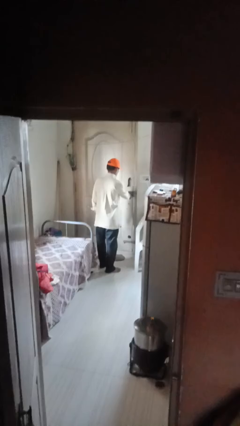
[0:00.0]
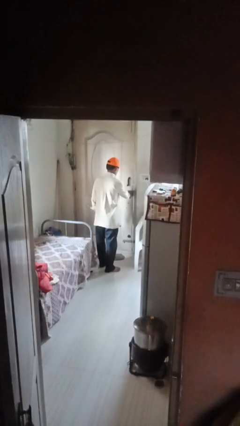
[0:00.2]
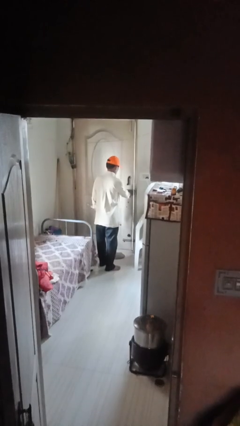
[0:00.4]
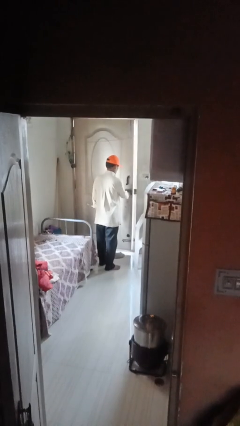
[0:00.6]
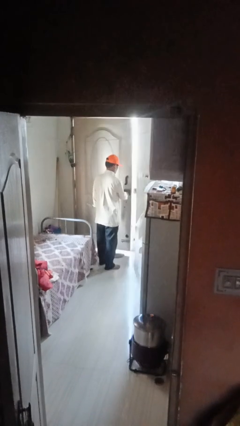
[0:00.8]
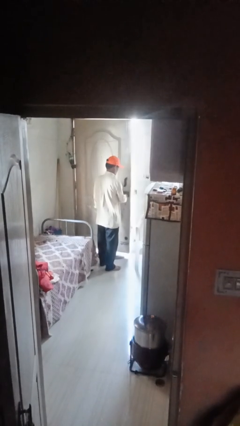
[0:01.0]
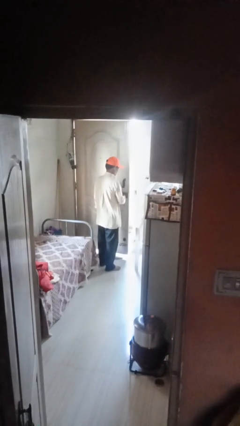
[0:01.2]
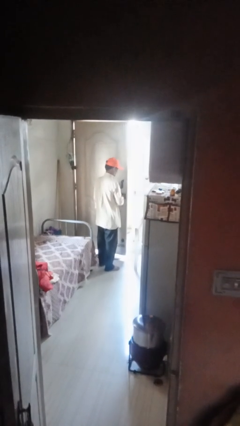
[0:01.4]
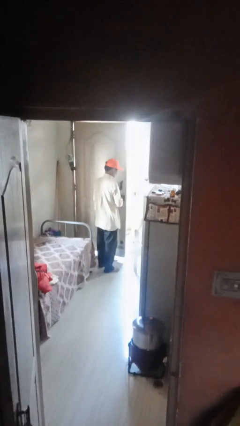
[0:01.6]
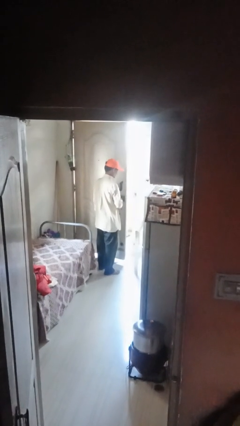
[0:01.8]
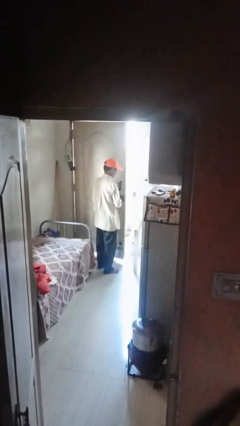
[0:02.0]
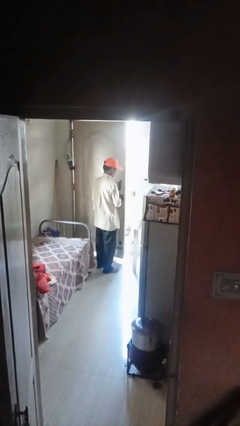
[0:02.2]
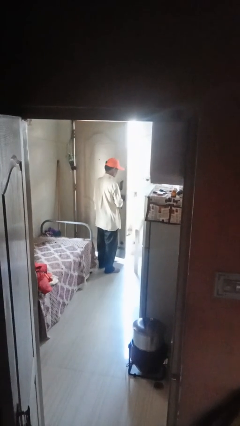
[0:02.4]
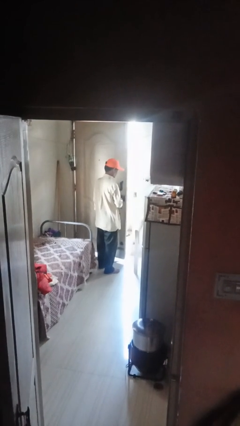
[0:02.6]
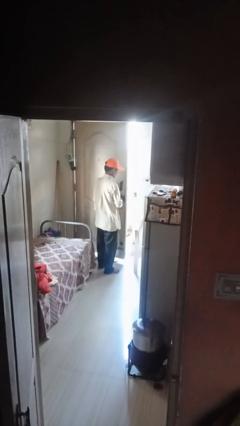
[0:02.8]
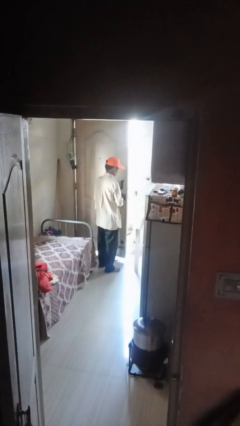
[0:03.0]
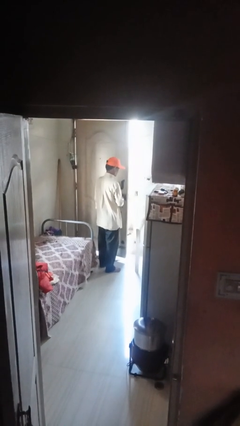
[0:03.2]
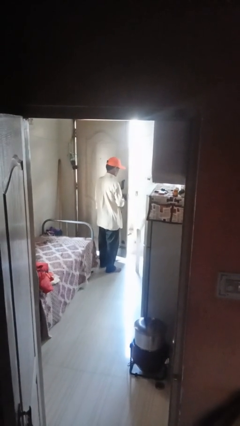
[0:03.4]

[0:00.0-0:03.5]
person opens facility door

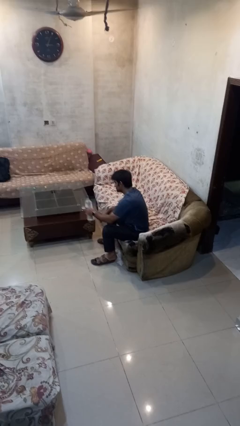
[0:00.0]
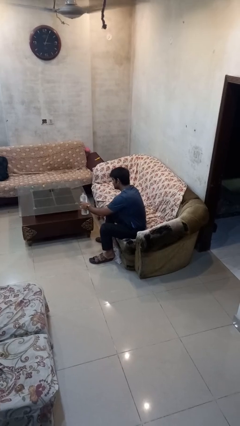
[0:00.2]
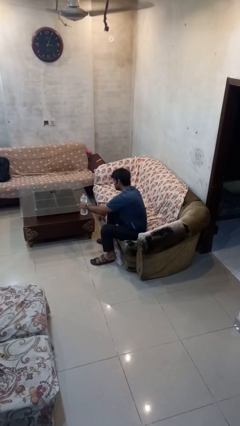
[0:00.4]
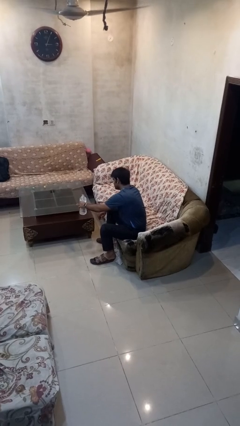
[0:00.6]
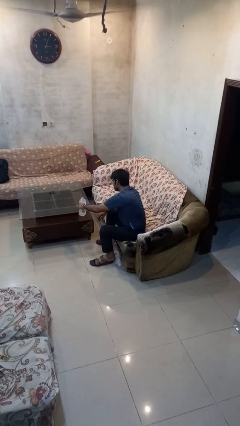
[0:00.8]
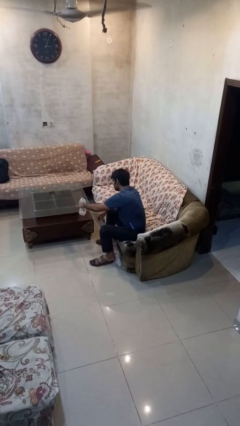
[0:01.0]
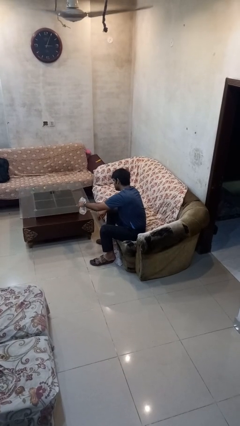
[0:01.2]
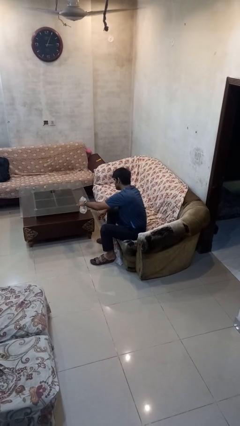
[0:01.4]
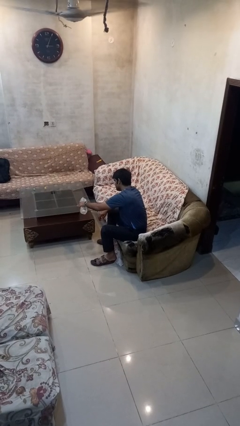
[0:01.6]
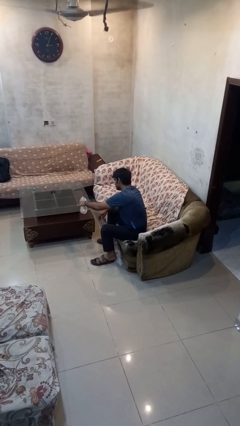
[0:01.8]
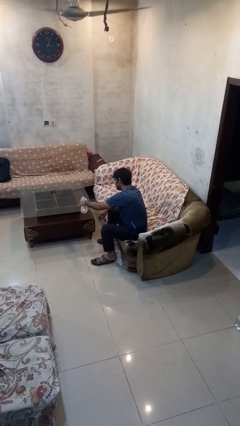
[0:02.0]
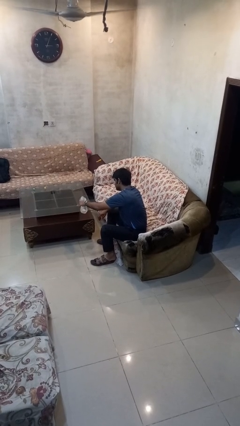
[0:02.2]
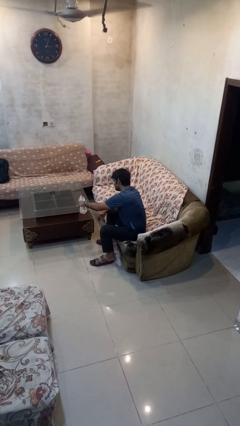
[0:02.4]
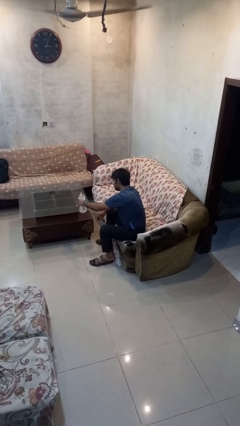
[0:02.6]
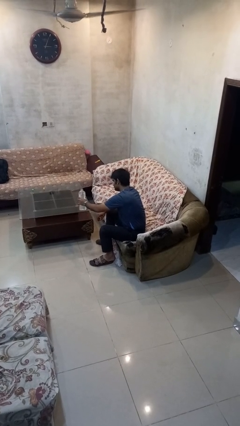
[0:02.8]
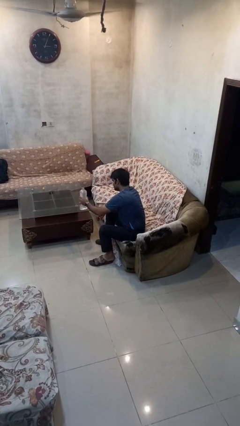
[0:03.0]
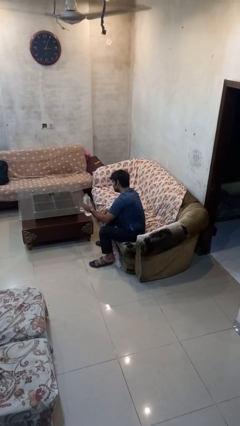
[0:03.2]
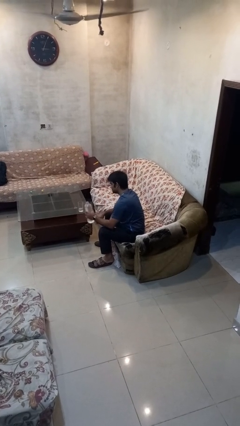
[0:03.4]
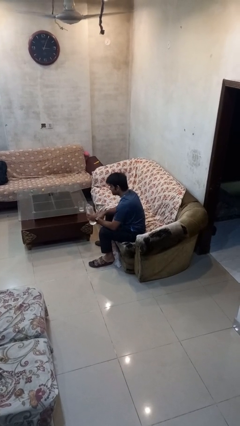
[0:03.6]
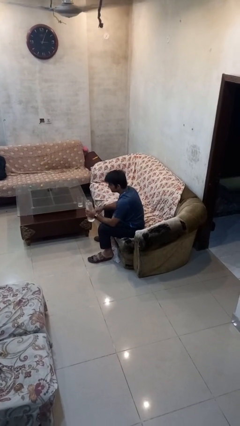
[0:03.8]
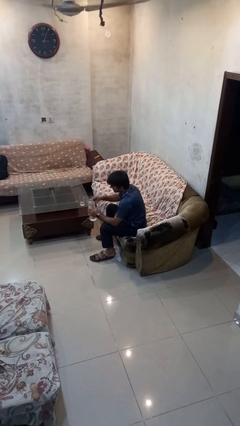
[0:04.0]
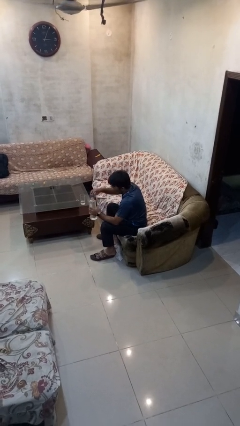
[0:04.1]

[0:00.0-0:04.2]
person pours liquid into cup

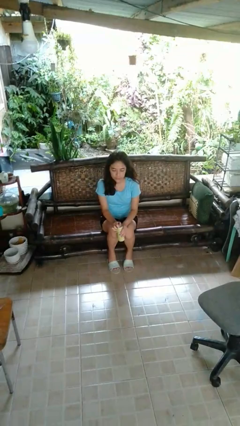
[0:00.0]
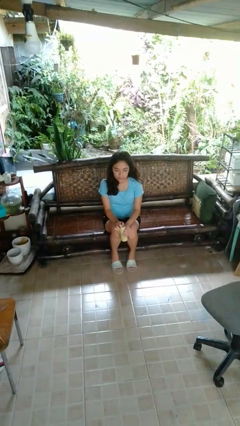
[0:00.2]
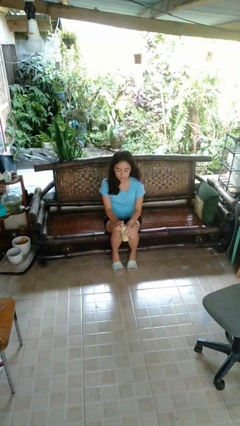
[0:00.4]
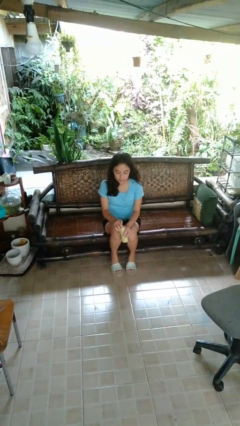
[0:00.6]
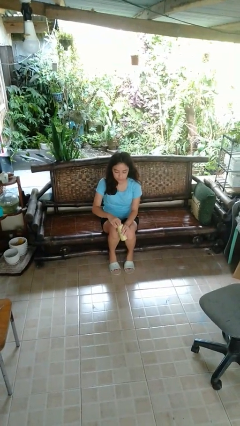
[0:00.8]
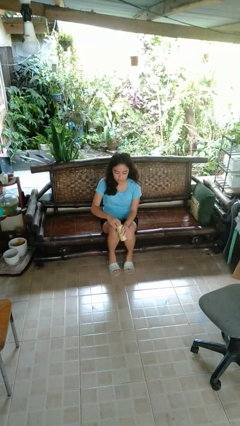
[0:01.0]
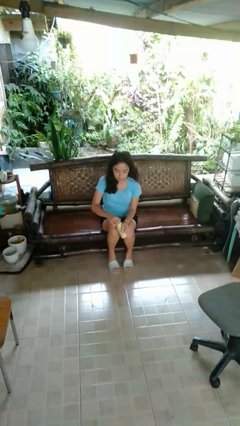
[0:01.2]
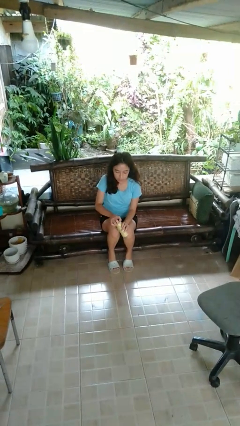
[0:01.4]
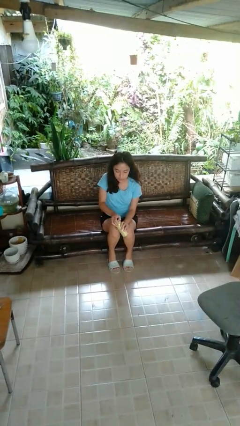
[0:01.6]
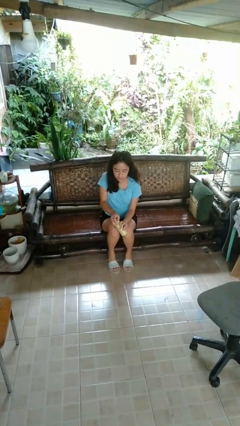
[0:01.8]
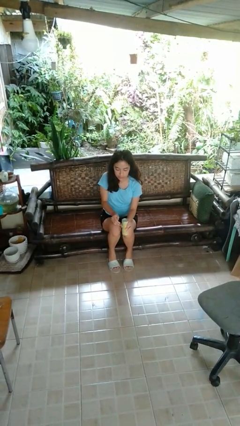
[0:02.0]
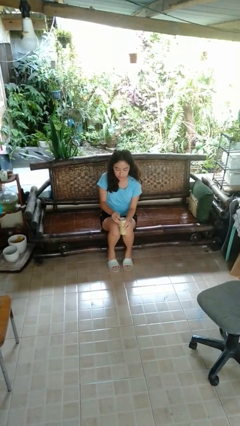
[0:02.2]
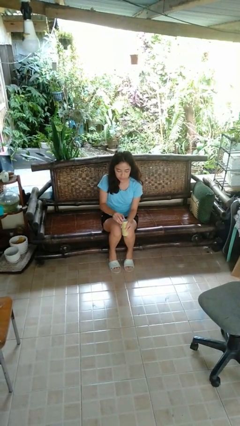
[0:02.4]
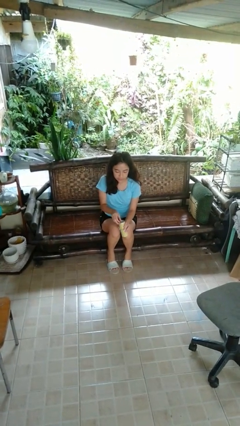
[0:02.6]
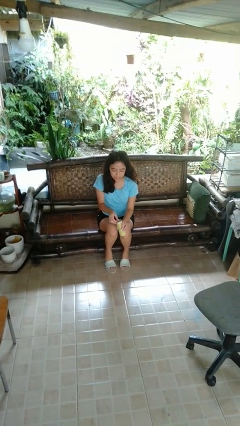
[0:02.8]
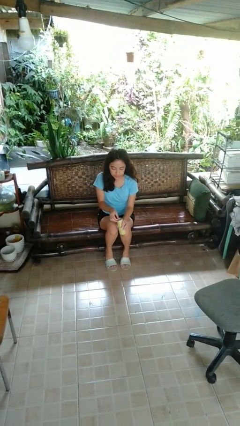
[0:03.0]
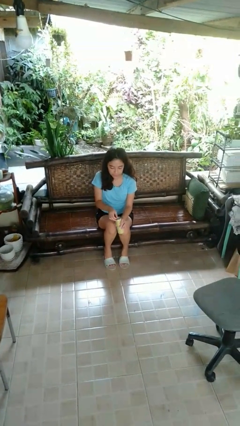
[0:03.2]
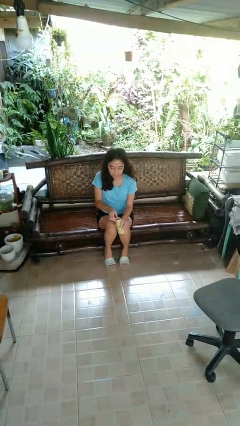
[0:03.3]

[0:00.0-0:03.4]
person opens beverage can

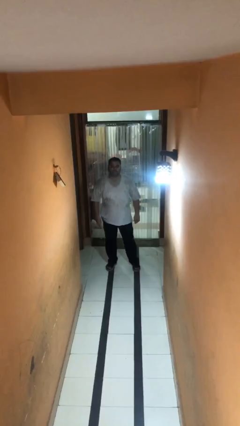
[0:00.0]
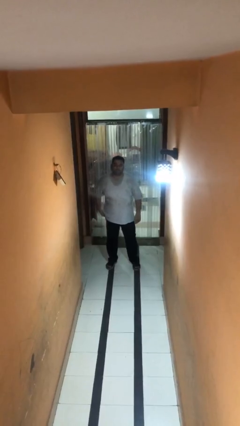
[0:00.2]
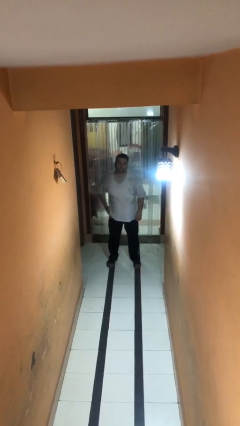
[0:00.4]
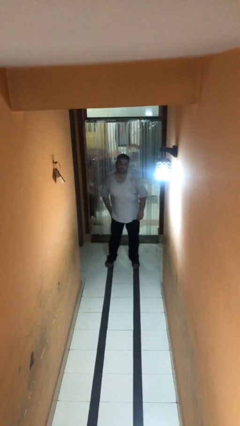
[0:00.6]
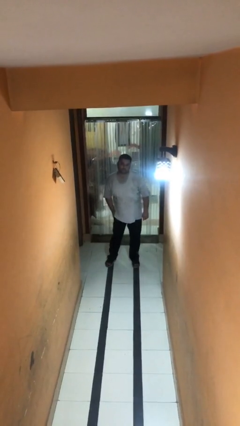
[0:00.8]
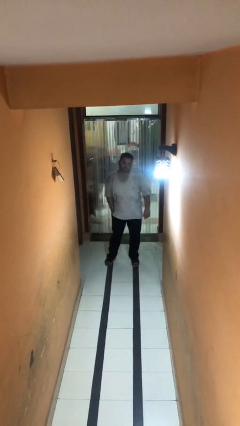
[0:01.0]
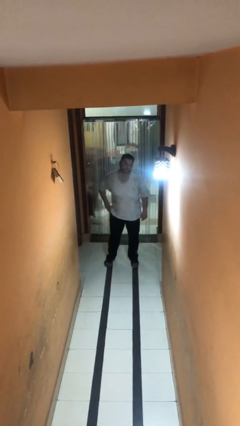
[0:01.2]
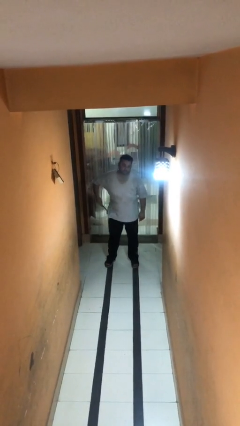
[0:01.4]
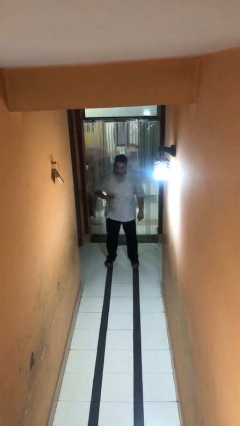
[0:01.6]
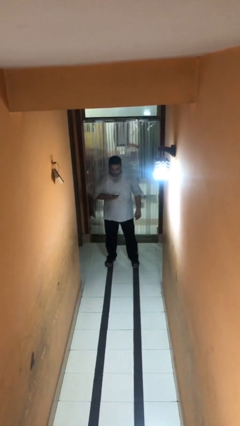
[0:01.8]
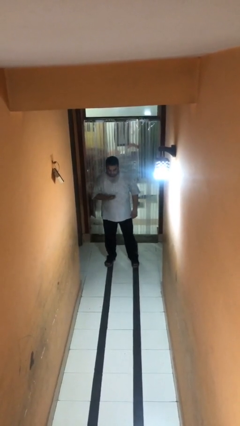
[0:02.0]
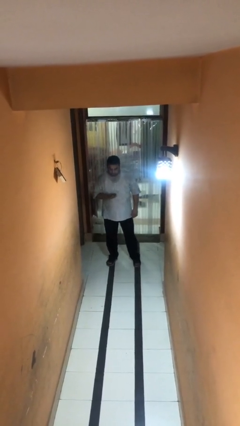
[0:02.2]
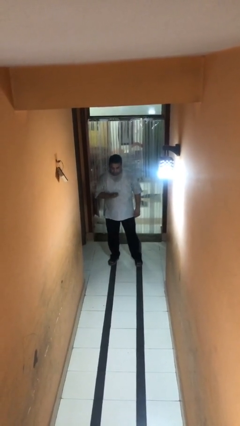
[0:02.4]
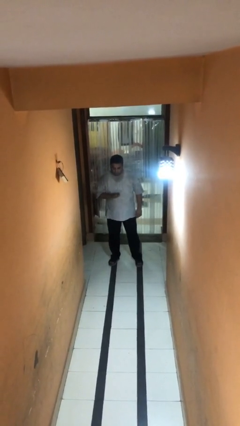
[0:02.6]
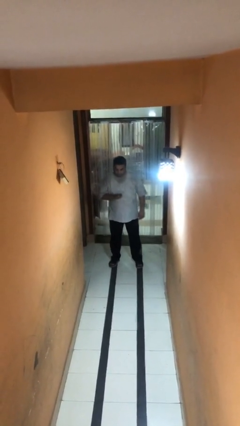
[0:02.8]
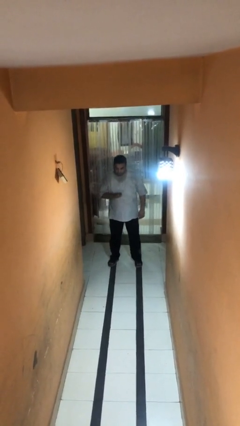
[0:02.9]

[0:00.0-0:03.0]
person takes phone from pocket

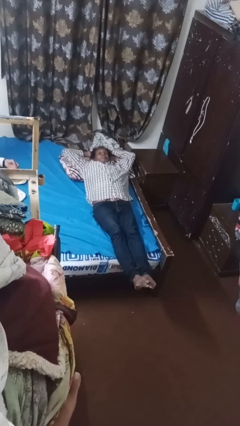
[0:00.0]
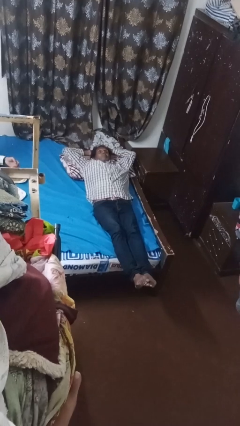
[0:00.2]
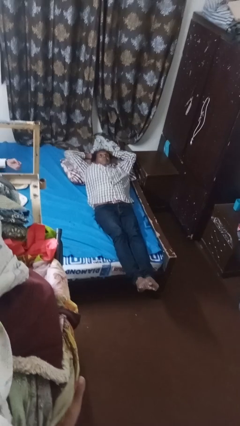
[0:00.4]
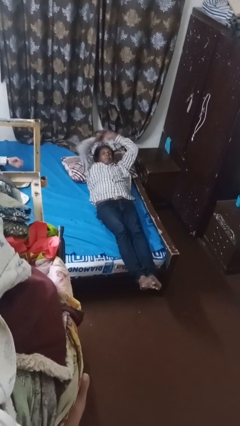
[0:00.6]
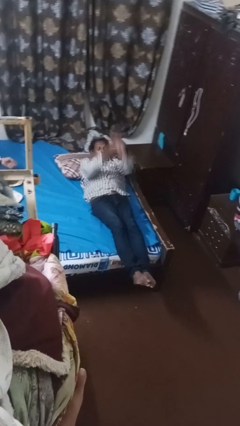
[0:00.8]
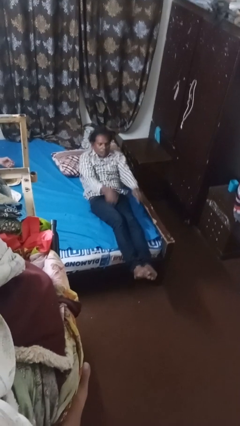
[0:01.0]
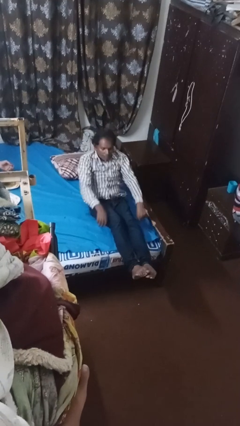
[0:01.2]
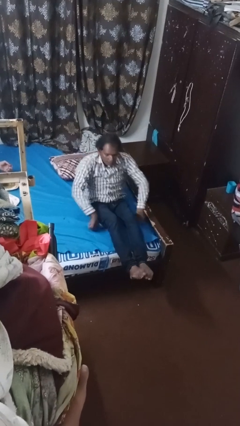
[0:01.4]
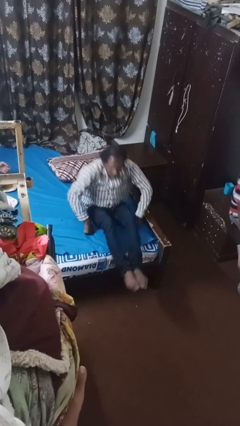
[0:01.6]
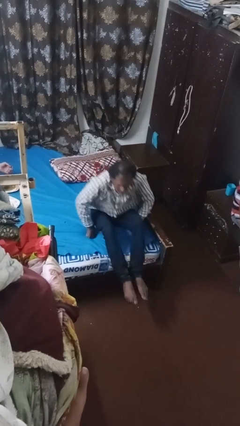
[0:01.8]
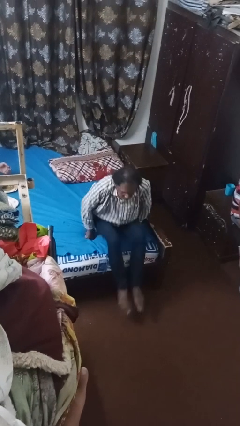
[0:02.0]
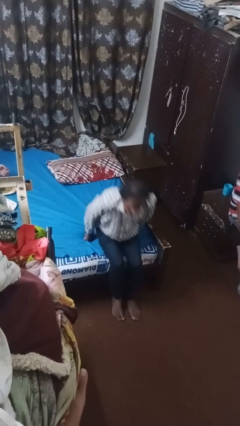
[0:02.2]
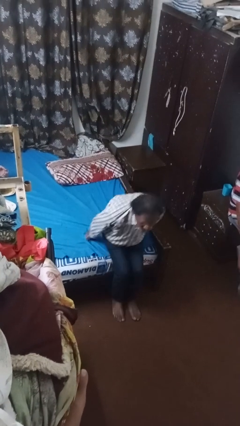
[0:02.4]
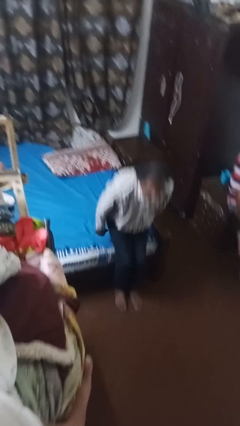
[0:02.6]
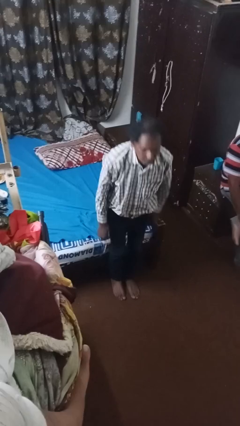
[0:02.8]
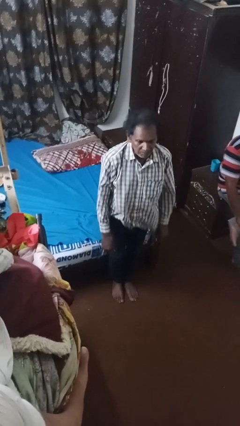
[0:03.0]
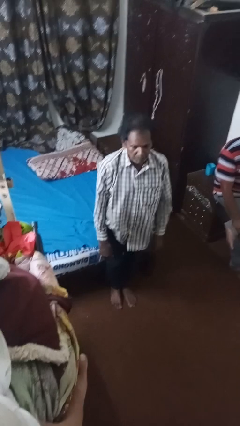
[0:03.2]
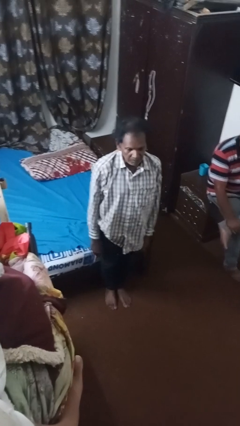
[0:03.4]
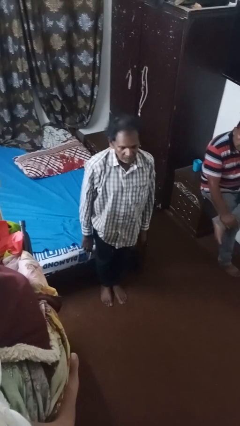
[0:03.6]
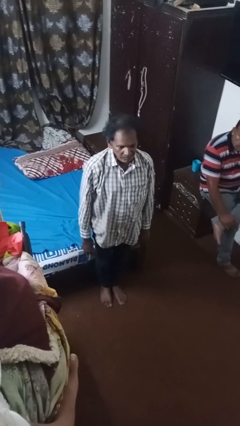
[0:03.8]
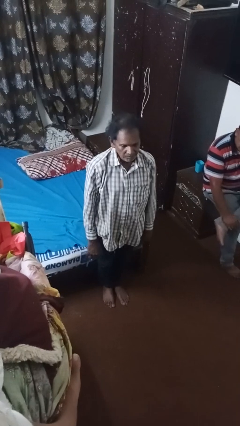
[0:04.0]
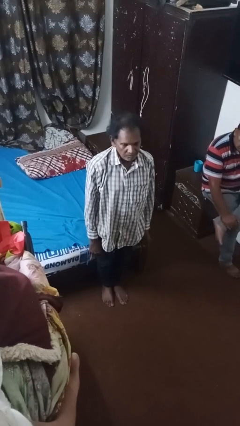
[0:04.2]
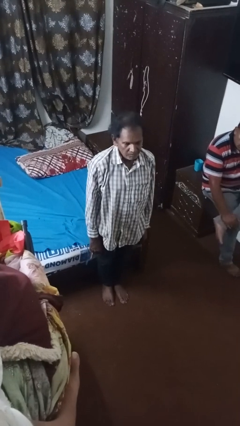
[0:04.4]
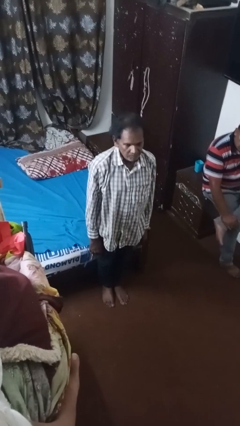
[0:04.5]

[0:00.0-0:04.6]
person stands up
